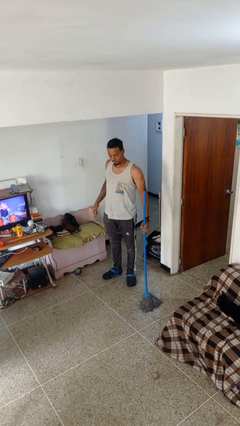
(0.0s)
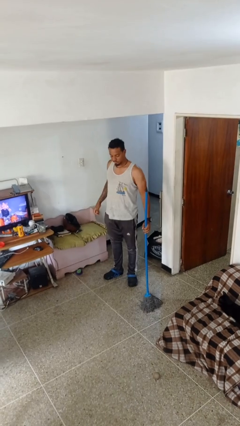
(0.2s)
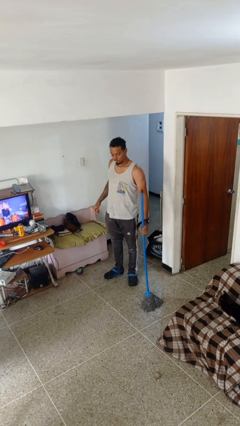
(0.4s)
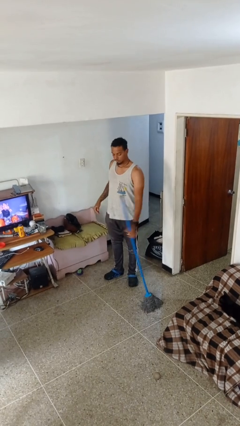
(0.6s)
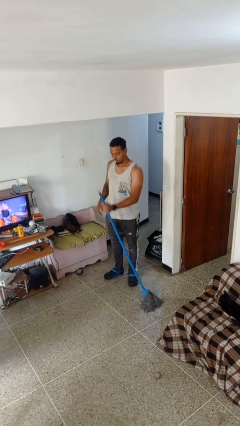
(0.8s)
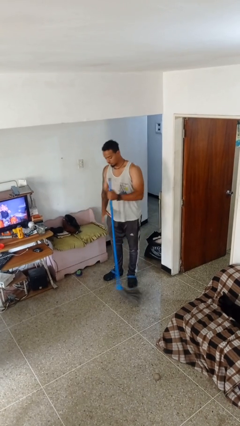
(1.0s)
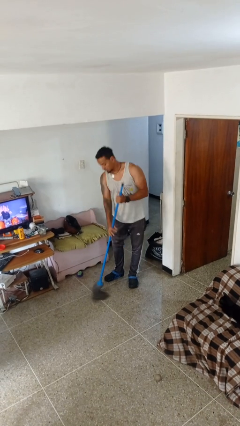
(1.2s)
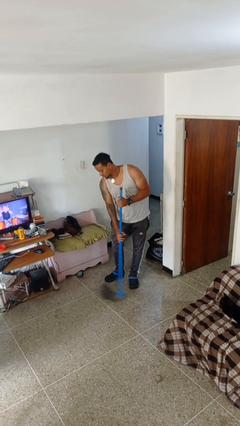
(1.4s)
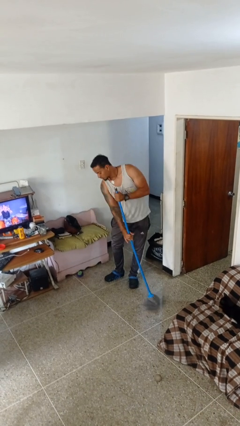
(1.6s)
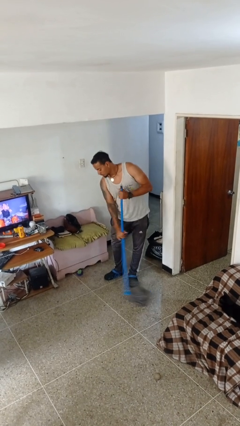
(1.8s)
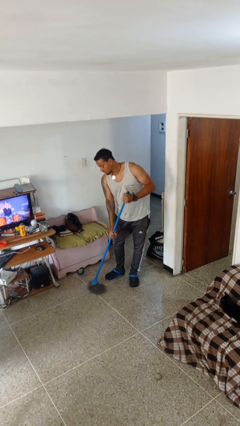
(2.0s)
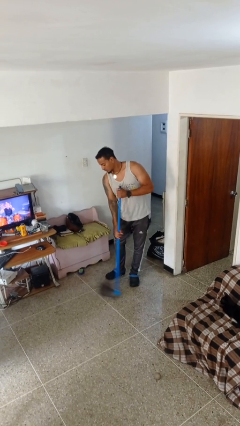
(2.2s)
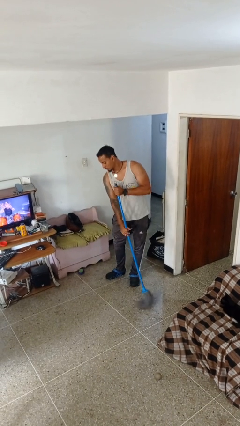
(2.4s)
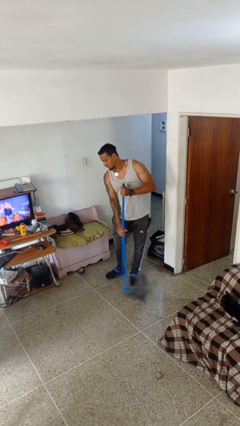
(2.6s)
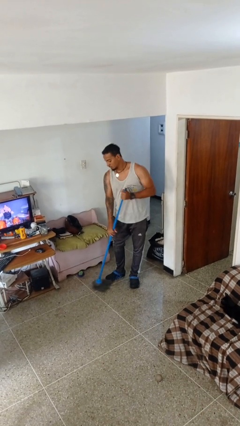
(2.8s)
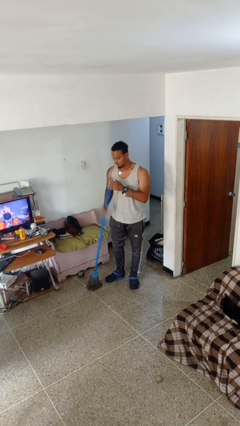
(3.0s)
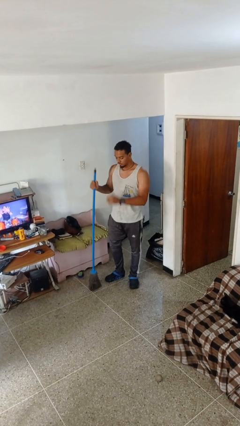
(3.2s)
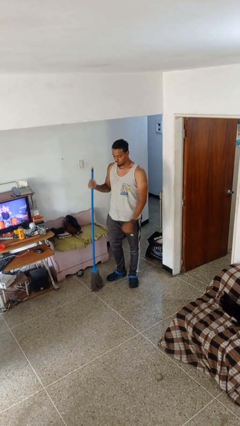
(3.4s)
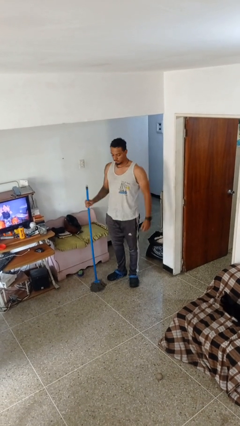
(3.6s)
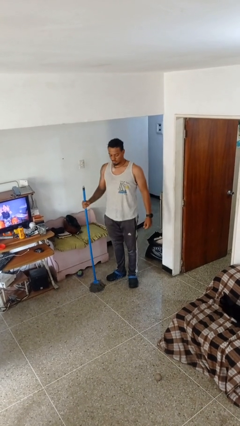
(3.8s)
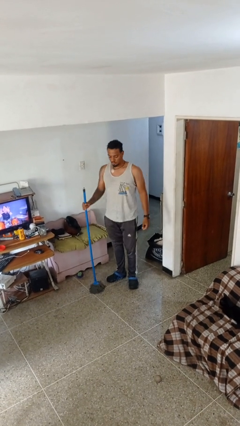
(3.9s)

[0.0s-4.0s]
person mops

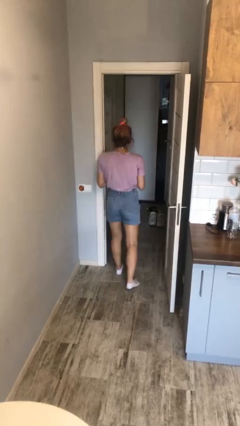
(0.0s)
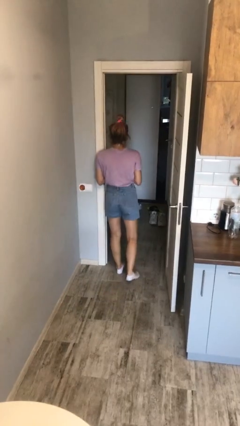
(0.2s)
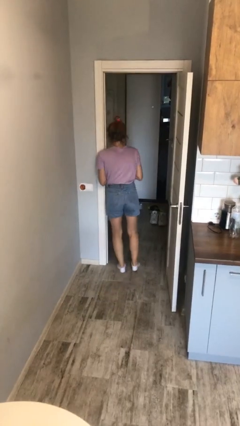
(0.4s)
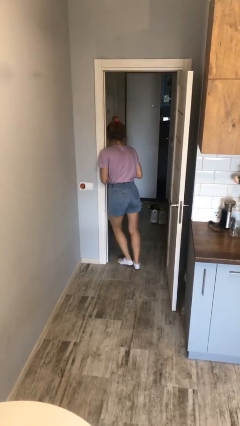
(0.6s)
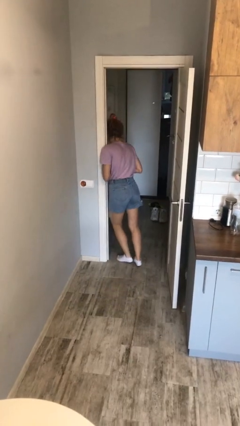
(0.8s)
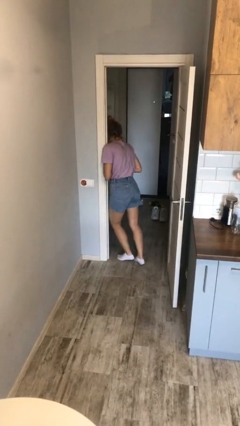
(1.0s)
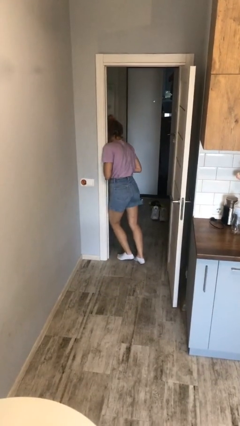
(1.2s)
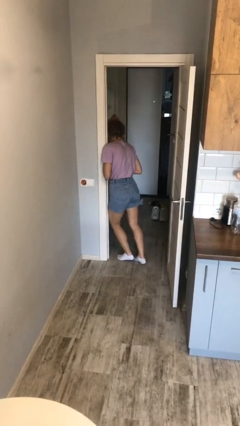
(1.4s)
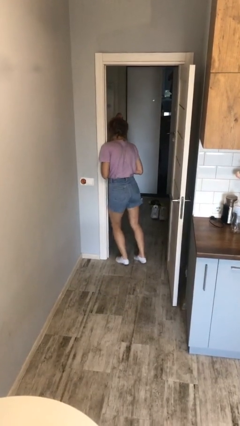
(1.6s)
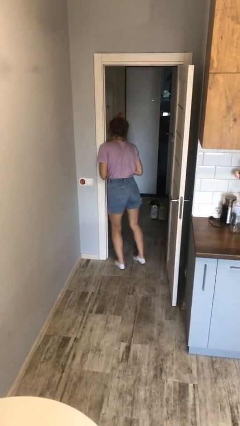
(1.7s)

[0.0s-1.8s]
person bumps into wall

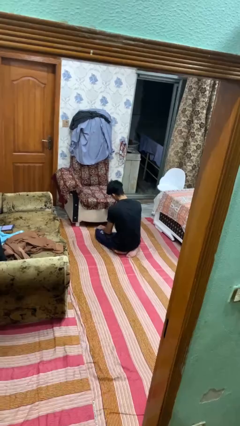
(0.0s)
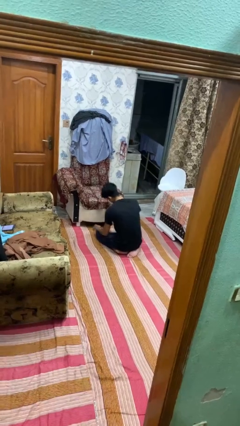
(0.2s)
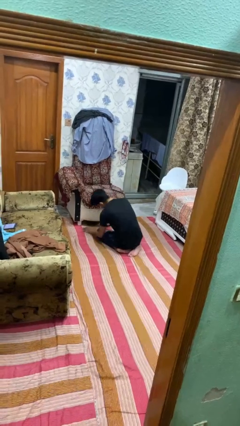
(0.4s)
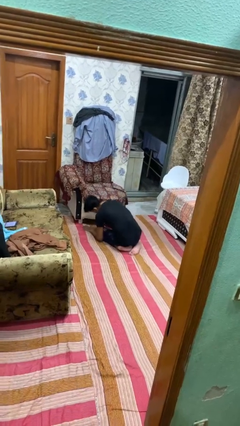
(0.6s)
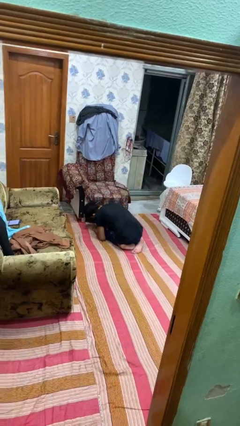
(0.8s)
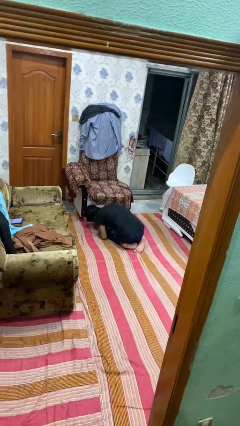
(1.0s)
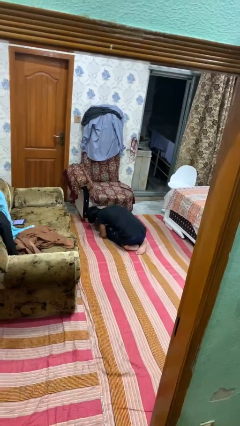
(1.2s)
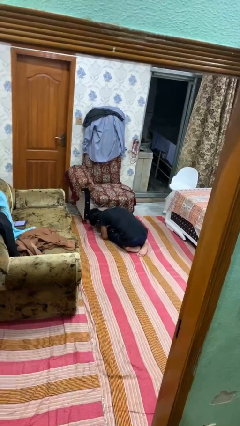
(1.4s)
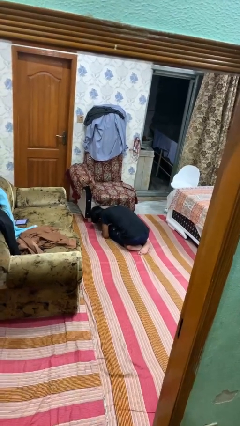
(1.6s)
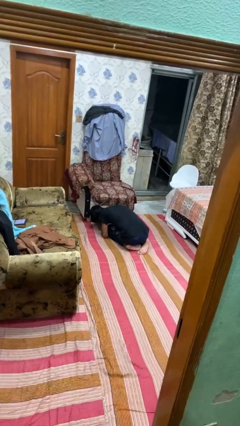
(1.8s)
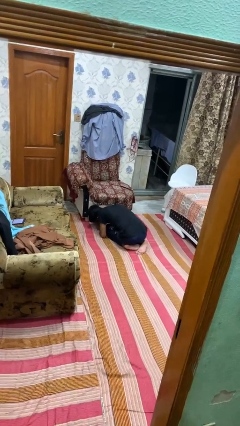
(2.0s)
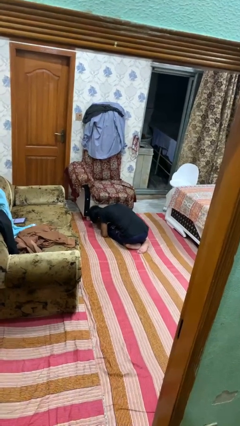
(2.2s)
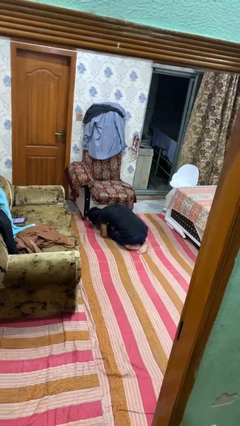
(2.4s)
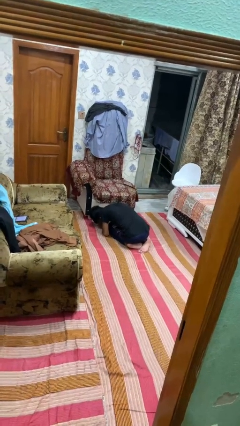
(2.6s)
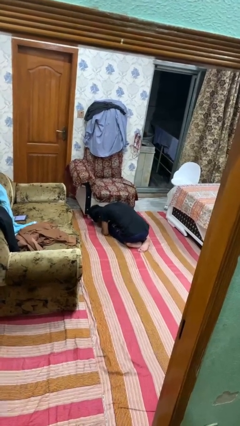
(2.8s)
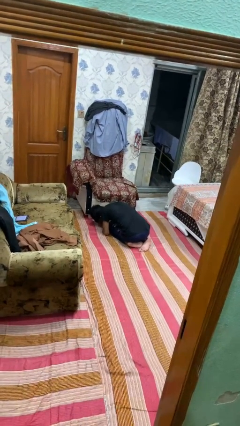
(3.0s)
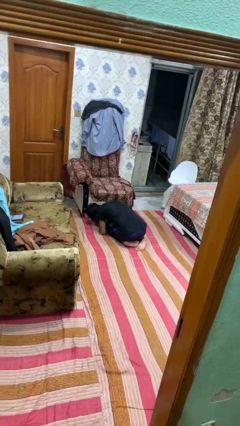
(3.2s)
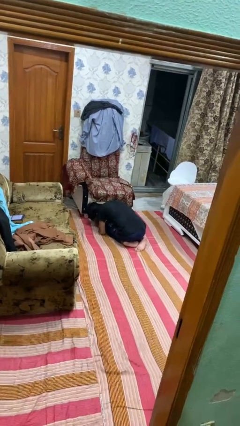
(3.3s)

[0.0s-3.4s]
person searches under couch

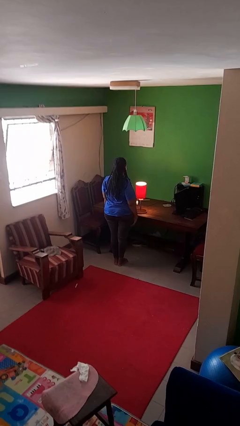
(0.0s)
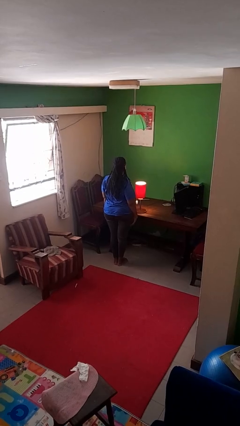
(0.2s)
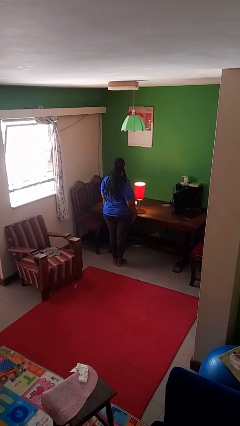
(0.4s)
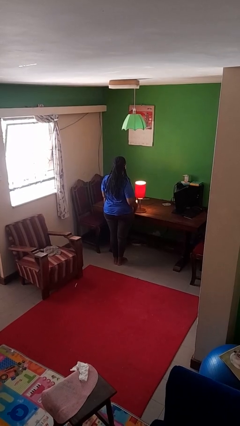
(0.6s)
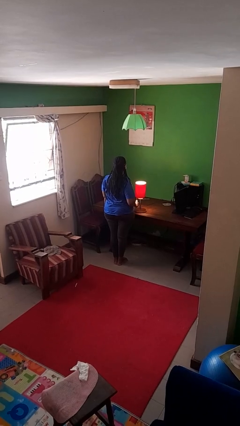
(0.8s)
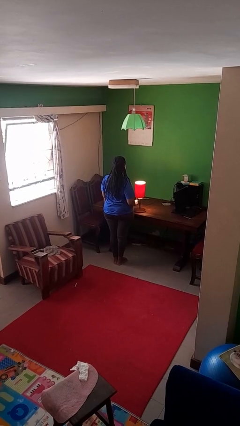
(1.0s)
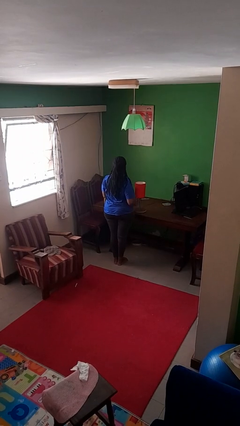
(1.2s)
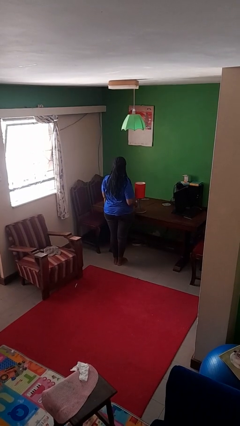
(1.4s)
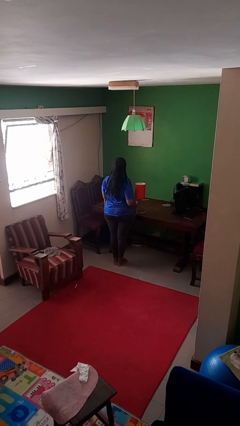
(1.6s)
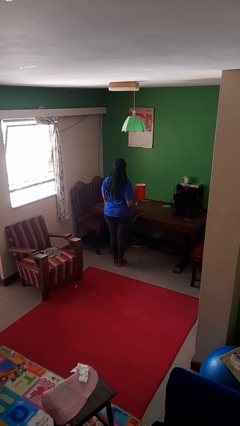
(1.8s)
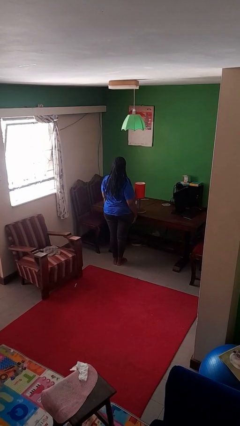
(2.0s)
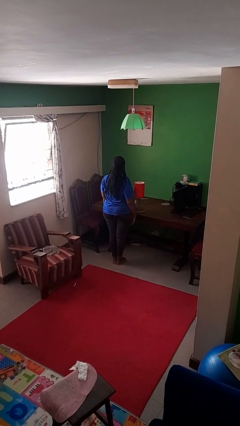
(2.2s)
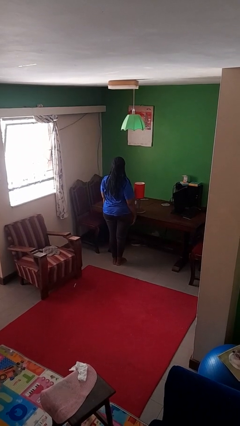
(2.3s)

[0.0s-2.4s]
person turns off lamp

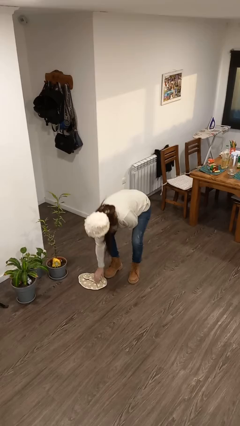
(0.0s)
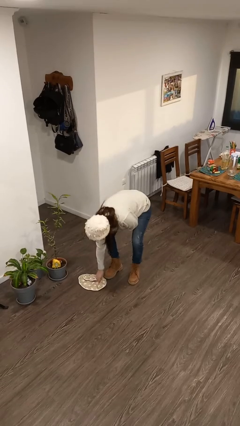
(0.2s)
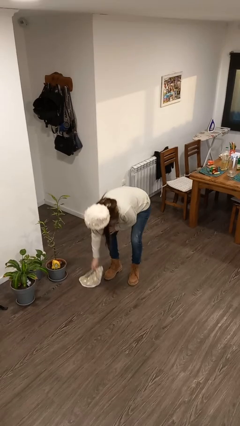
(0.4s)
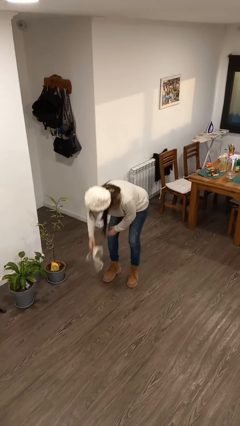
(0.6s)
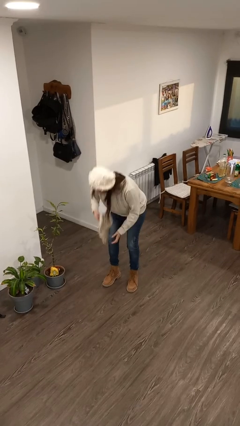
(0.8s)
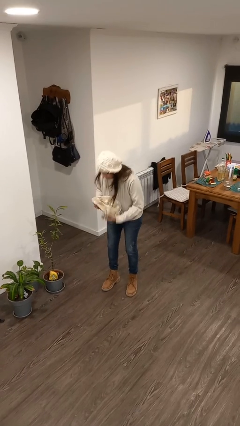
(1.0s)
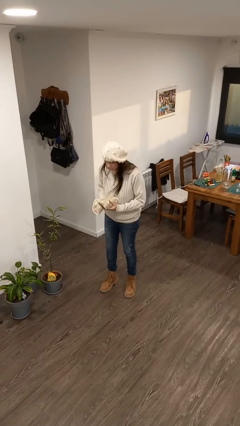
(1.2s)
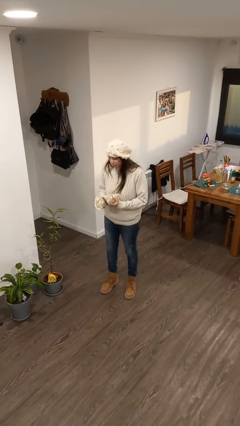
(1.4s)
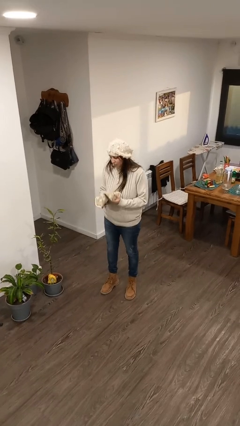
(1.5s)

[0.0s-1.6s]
person picks up object from floor

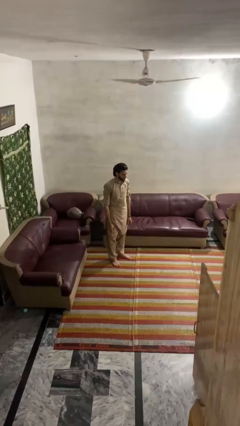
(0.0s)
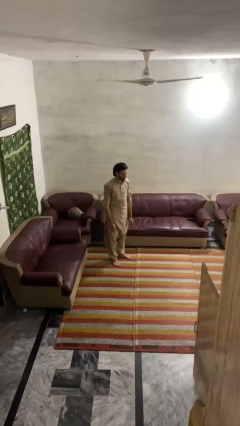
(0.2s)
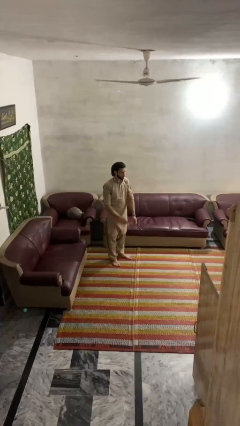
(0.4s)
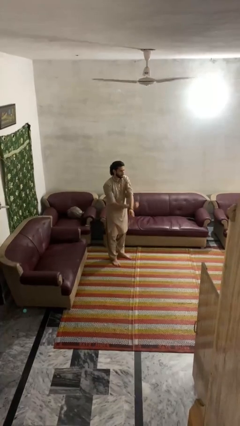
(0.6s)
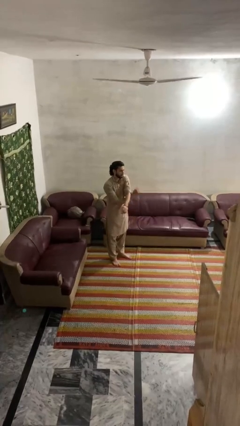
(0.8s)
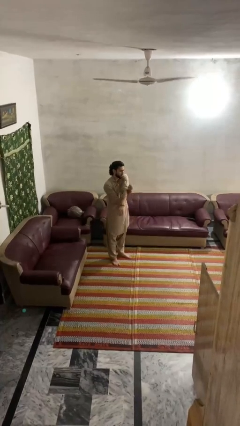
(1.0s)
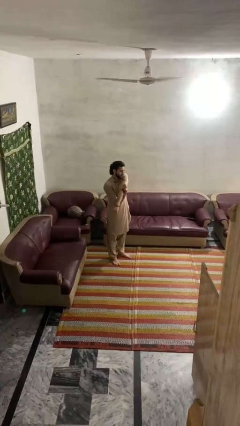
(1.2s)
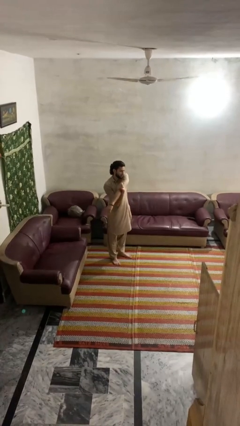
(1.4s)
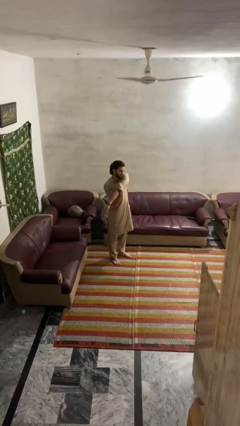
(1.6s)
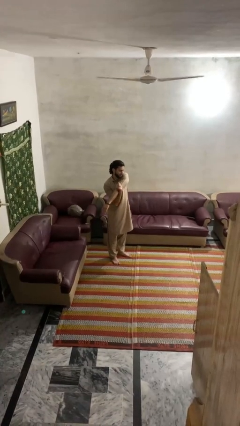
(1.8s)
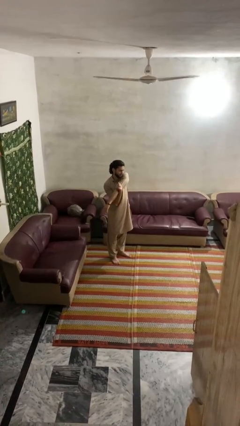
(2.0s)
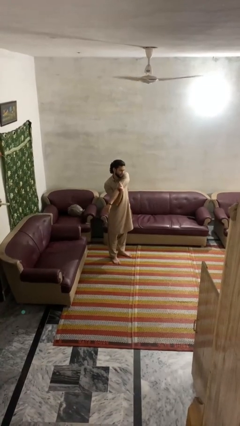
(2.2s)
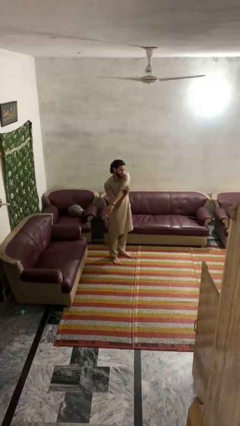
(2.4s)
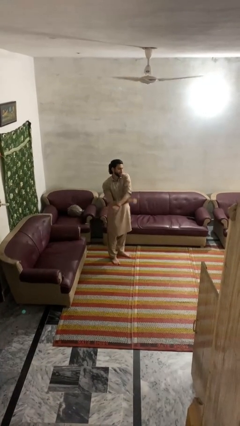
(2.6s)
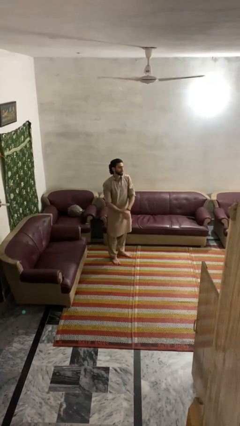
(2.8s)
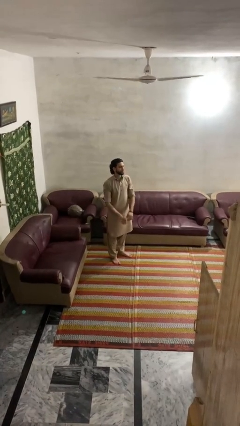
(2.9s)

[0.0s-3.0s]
person stretches arms to side

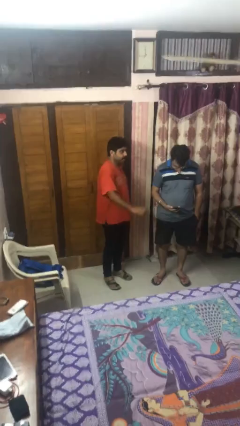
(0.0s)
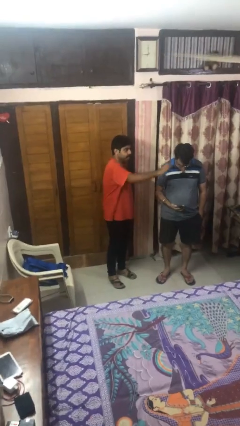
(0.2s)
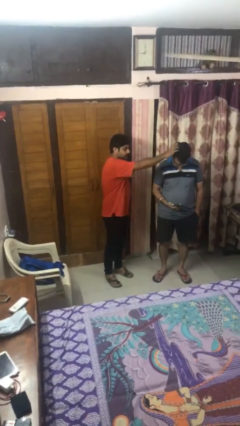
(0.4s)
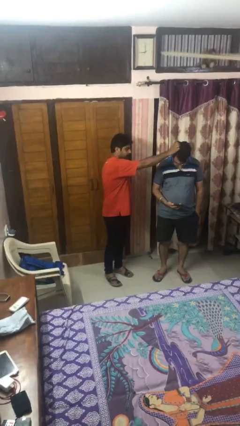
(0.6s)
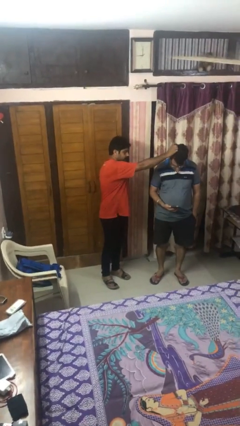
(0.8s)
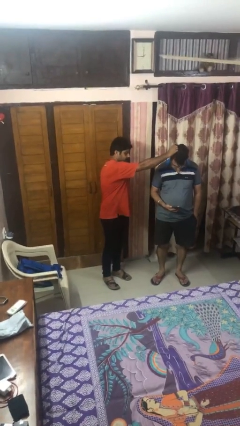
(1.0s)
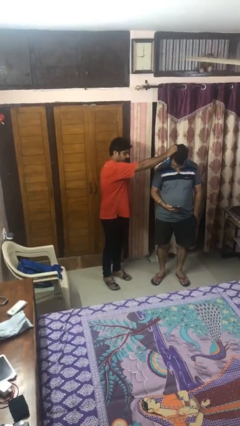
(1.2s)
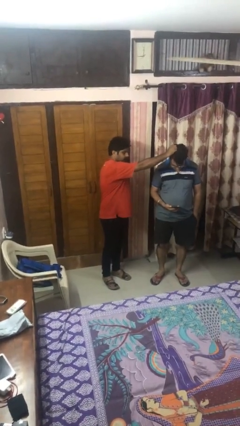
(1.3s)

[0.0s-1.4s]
person grabs person by hair
